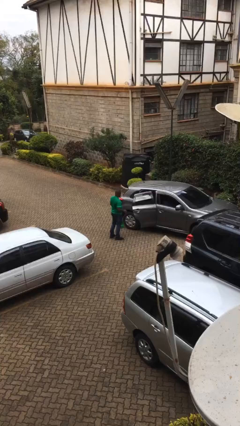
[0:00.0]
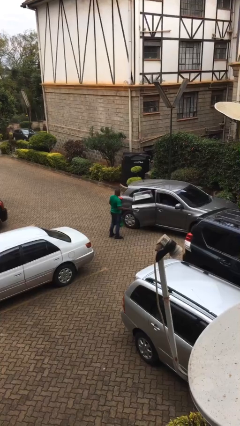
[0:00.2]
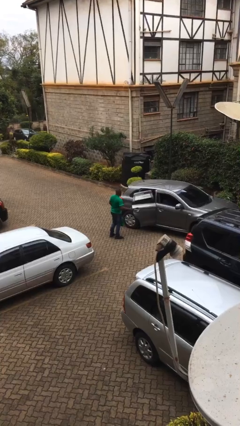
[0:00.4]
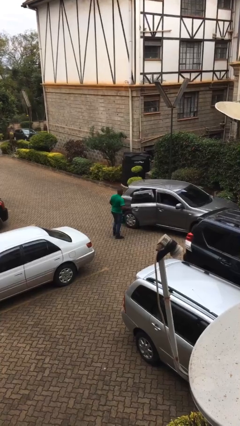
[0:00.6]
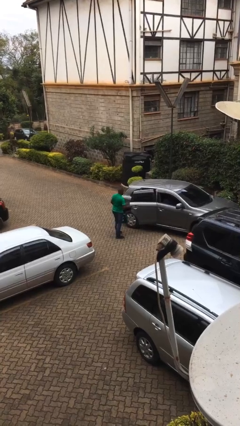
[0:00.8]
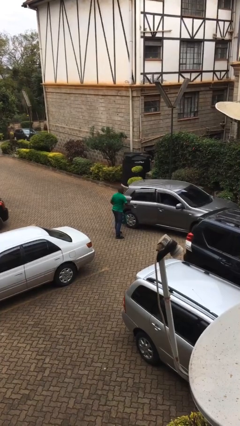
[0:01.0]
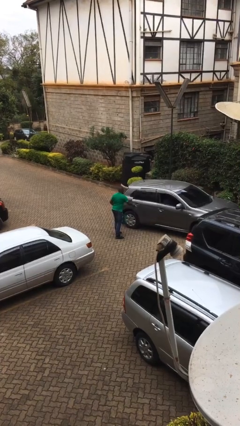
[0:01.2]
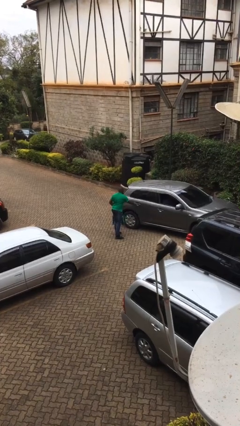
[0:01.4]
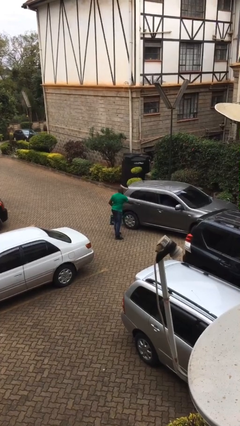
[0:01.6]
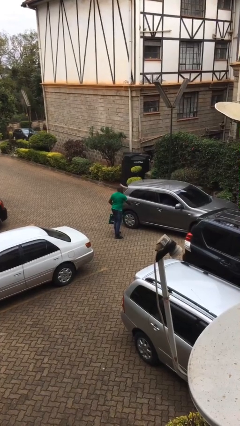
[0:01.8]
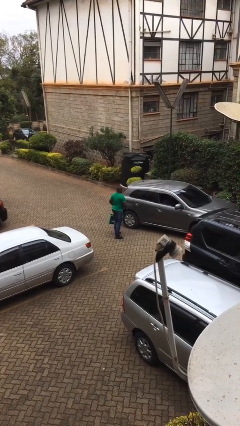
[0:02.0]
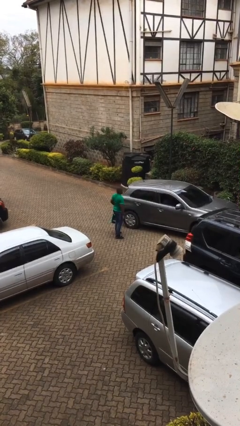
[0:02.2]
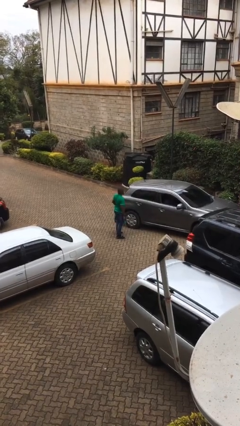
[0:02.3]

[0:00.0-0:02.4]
person closes car door

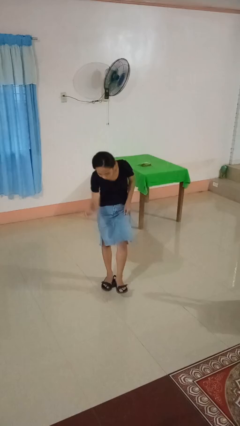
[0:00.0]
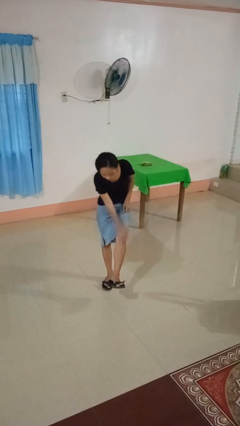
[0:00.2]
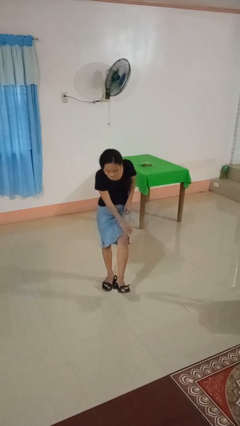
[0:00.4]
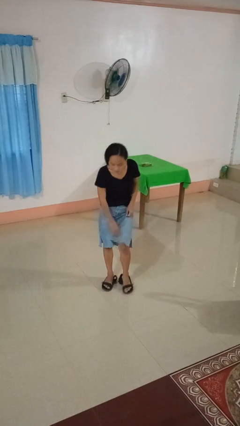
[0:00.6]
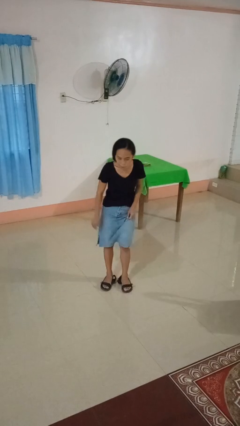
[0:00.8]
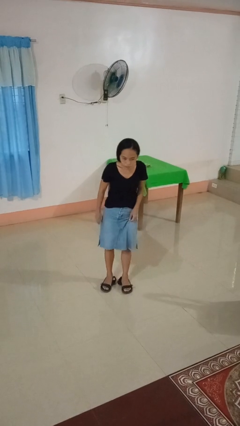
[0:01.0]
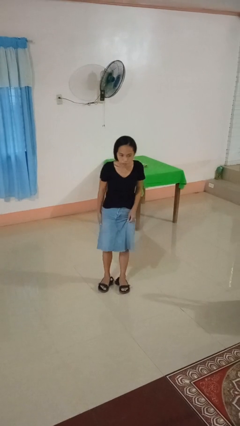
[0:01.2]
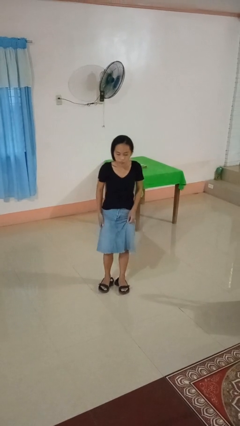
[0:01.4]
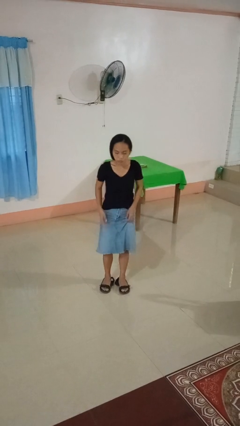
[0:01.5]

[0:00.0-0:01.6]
person swats bug

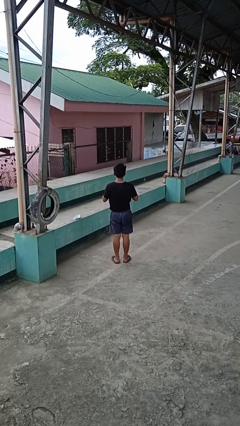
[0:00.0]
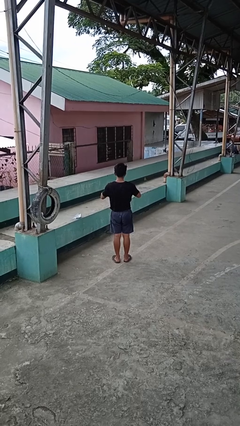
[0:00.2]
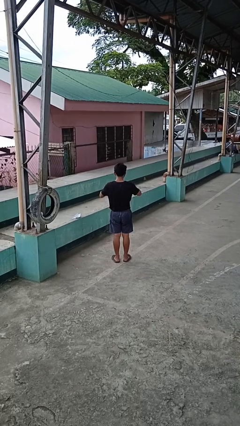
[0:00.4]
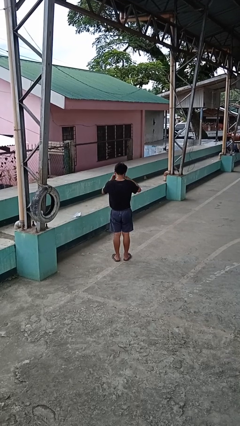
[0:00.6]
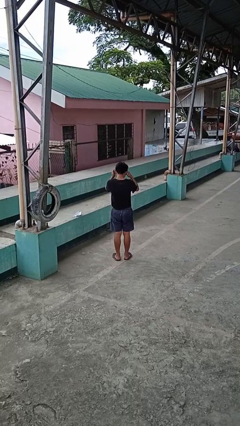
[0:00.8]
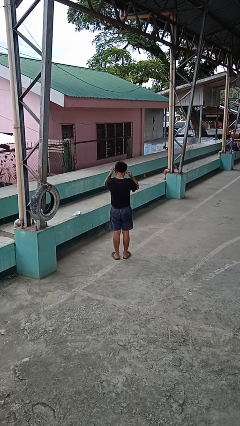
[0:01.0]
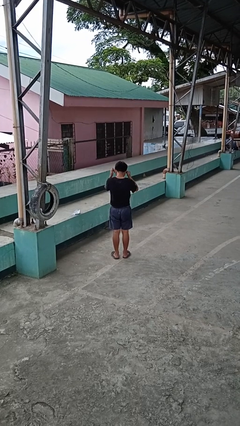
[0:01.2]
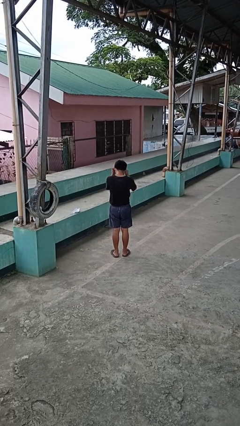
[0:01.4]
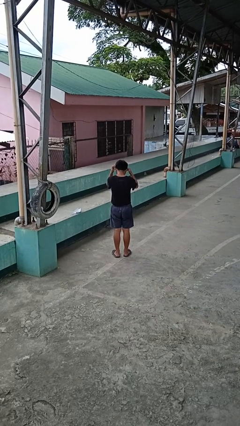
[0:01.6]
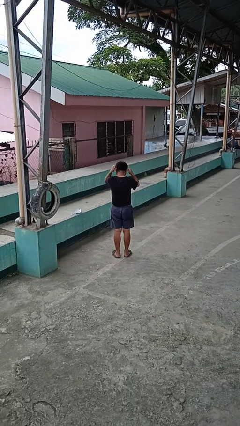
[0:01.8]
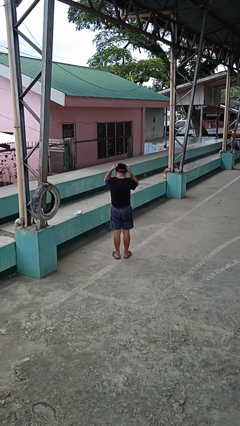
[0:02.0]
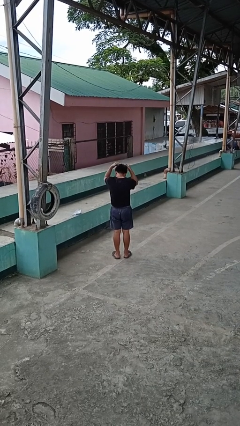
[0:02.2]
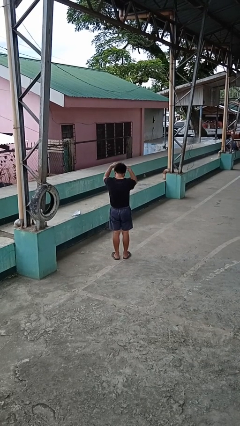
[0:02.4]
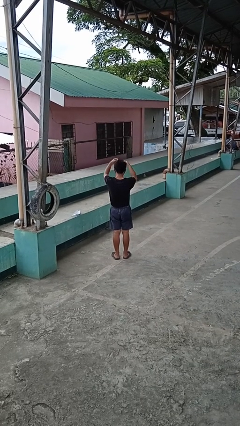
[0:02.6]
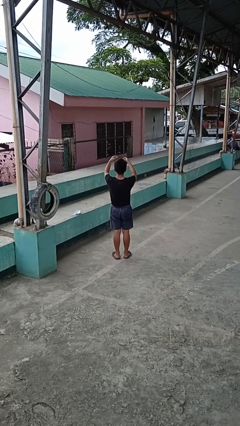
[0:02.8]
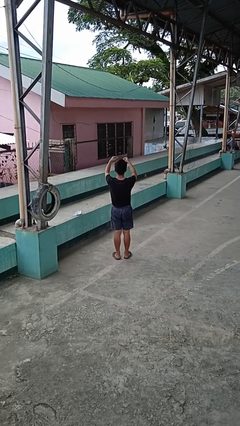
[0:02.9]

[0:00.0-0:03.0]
person takes off necklace

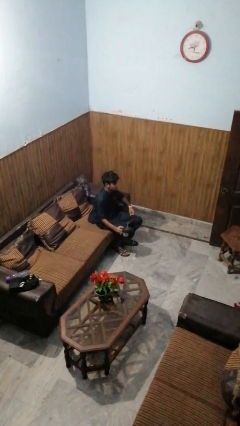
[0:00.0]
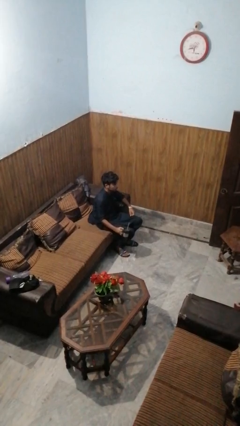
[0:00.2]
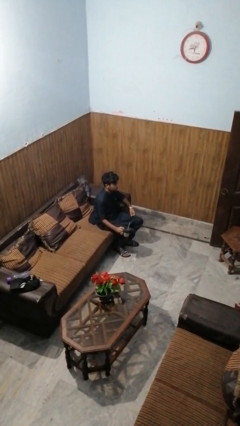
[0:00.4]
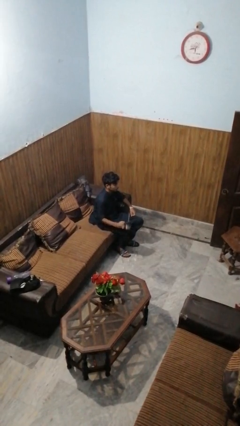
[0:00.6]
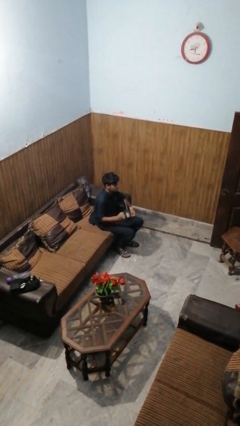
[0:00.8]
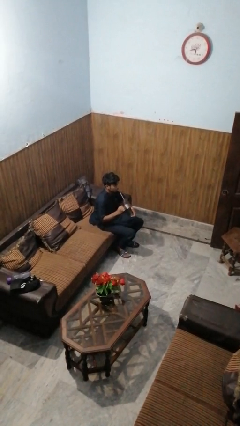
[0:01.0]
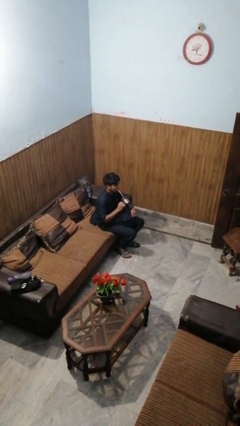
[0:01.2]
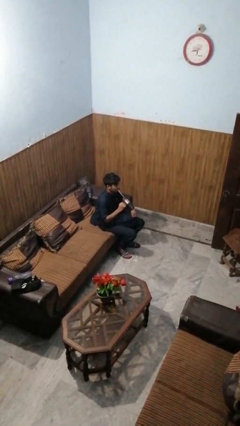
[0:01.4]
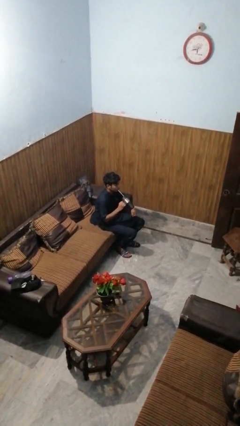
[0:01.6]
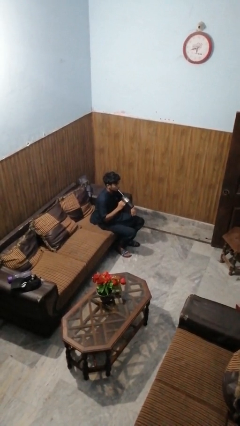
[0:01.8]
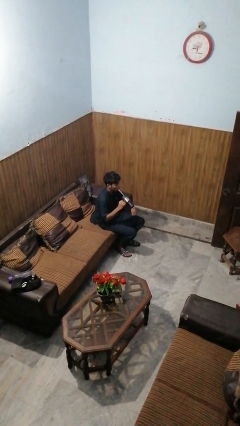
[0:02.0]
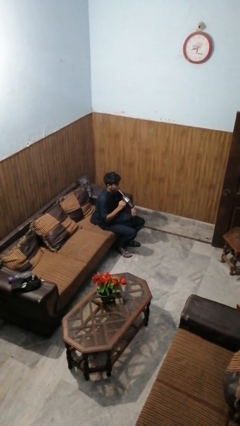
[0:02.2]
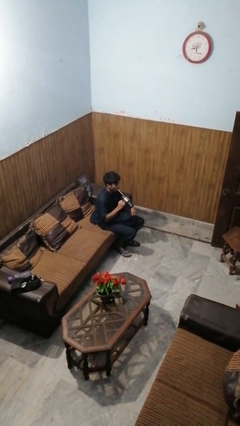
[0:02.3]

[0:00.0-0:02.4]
person drinks from straw

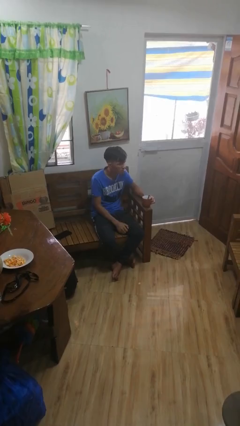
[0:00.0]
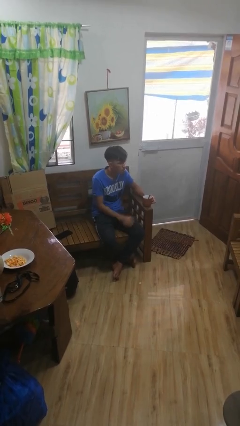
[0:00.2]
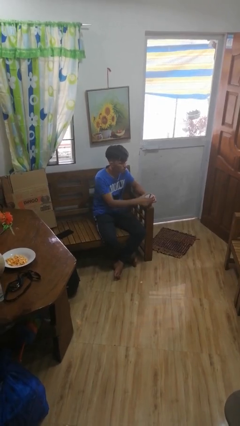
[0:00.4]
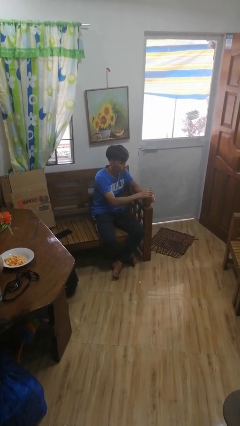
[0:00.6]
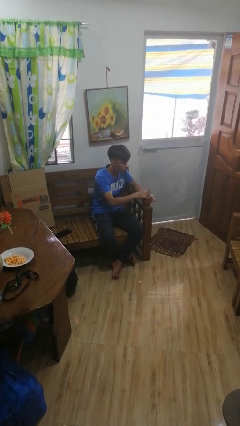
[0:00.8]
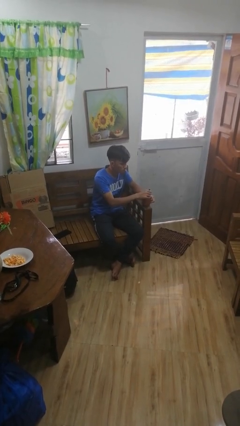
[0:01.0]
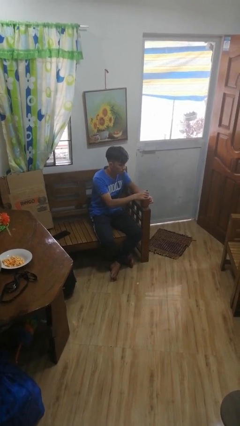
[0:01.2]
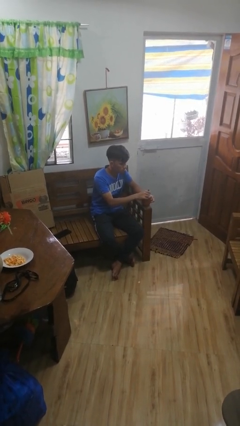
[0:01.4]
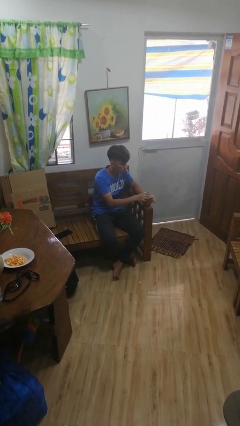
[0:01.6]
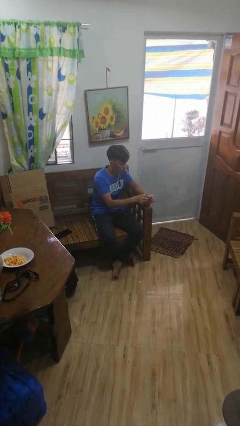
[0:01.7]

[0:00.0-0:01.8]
person stirs mug

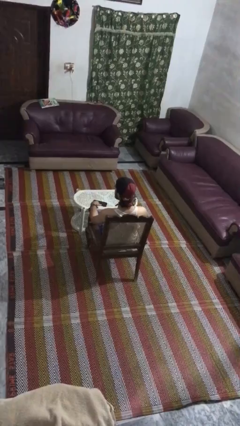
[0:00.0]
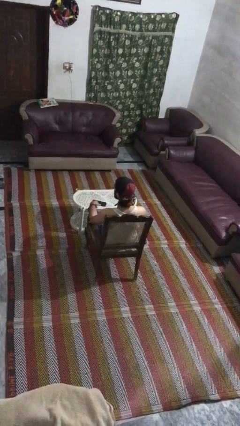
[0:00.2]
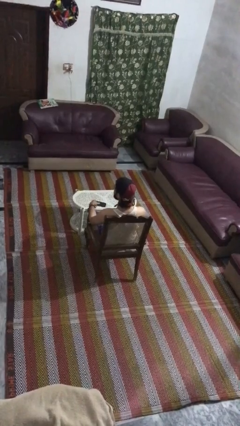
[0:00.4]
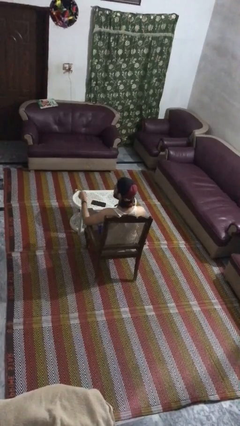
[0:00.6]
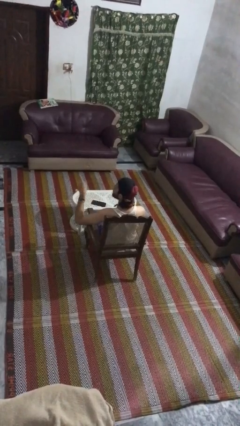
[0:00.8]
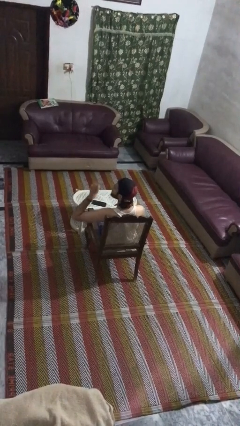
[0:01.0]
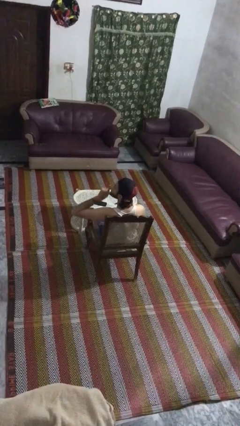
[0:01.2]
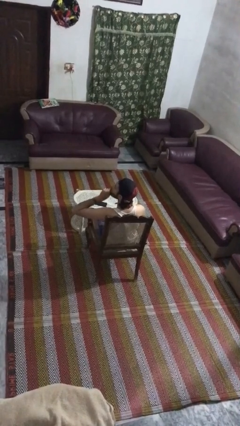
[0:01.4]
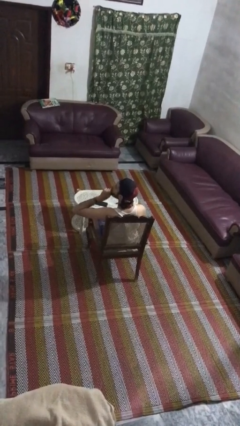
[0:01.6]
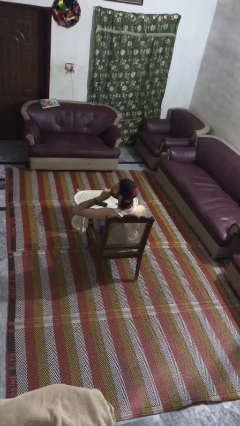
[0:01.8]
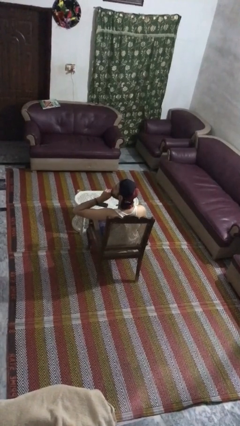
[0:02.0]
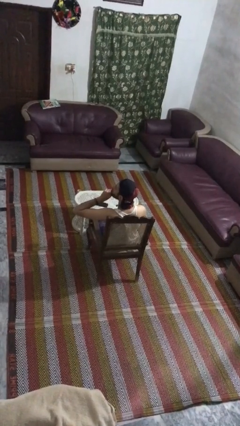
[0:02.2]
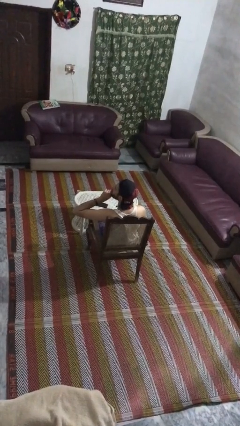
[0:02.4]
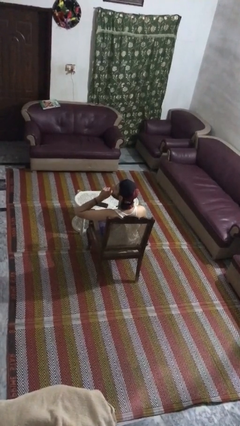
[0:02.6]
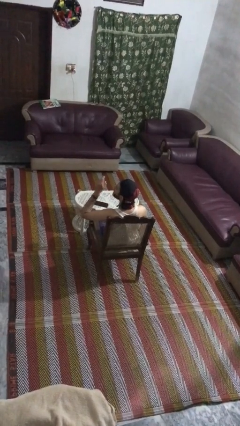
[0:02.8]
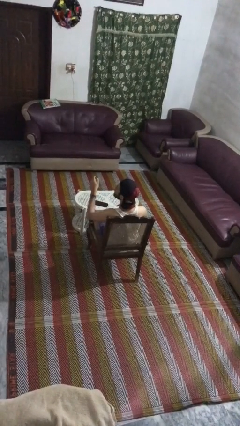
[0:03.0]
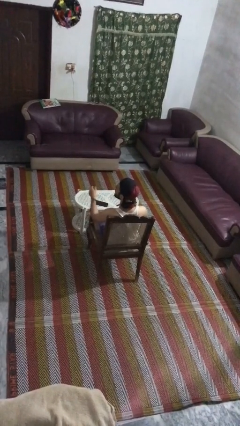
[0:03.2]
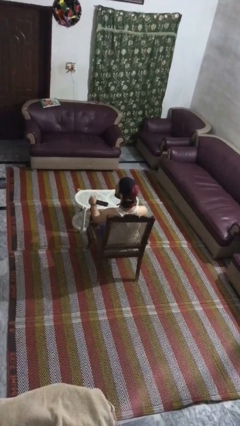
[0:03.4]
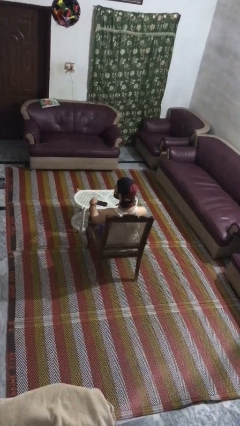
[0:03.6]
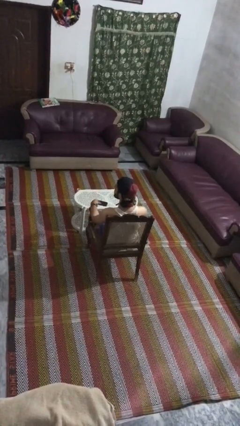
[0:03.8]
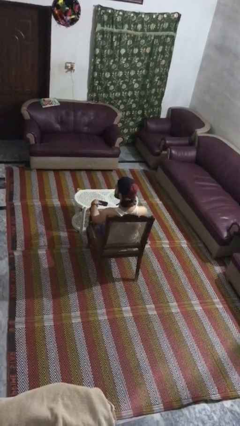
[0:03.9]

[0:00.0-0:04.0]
person gestures be quiet

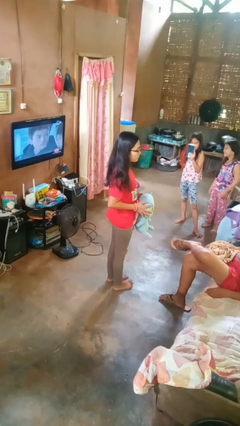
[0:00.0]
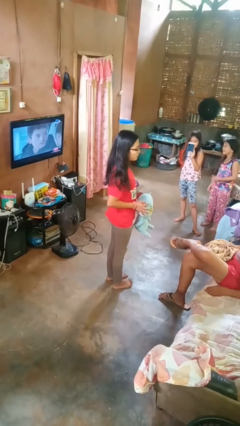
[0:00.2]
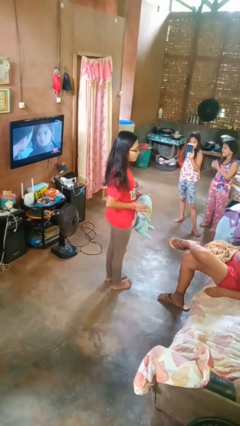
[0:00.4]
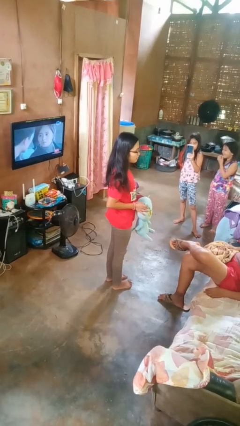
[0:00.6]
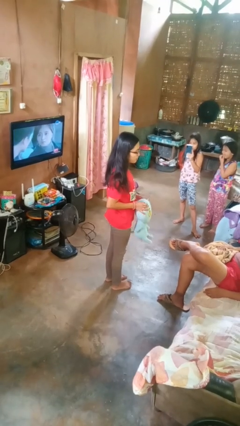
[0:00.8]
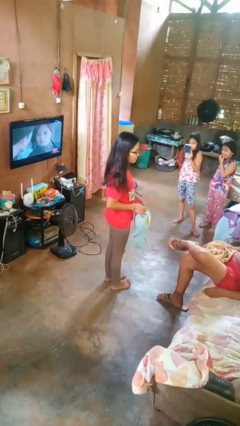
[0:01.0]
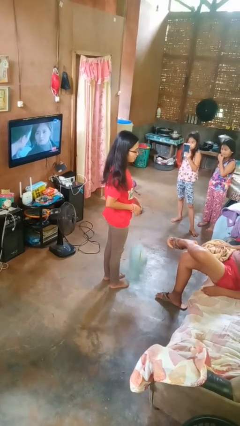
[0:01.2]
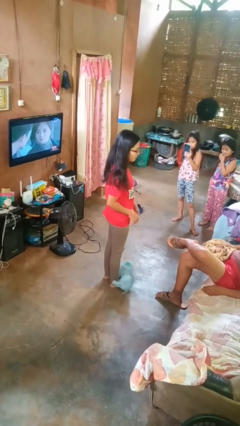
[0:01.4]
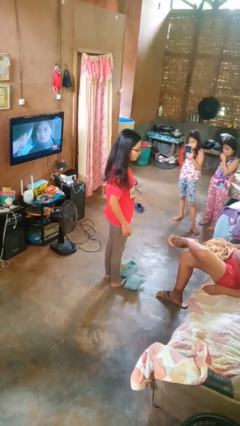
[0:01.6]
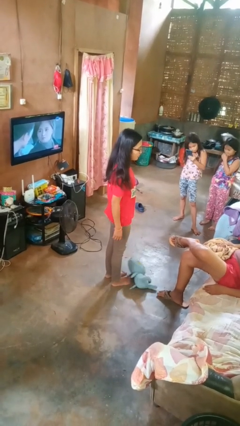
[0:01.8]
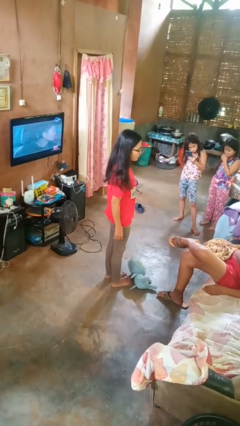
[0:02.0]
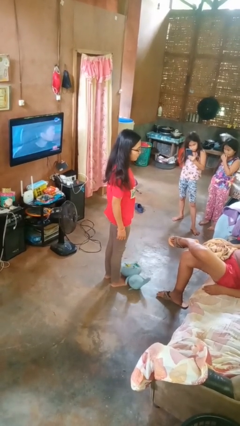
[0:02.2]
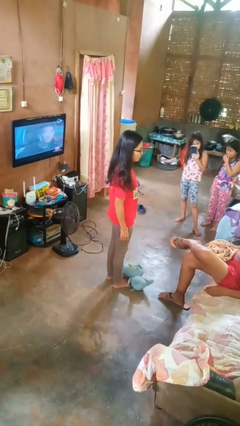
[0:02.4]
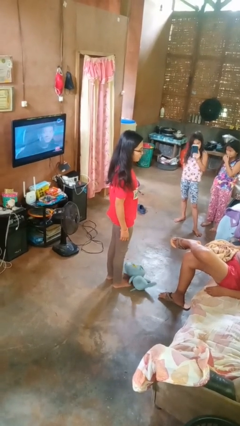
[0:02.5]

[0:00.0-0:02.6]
person drops object
